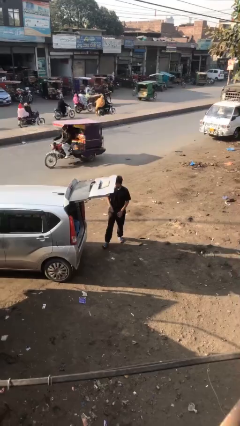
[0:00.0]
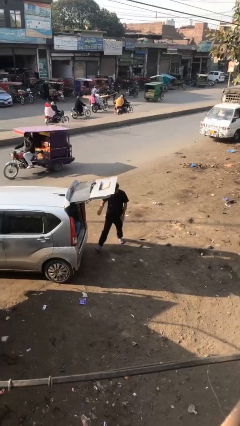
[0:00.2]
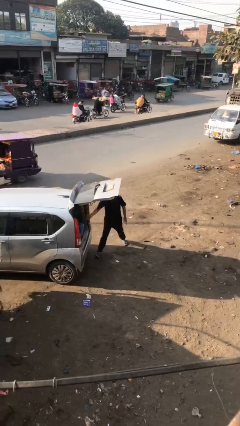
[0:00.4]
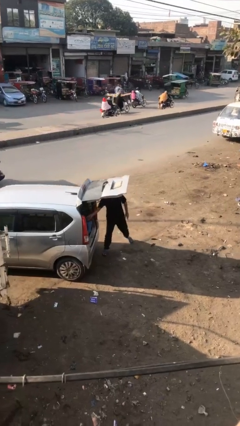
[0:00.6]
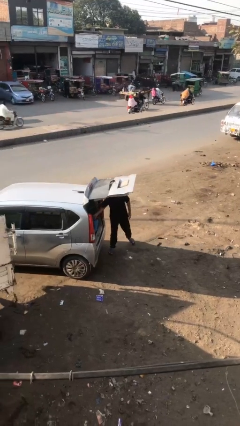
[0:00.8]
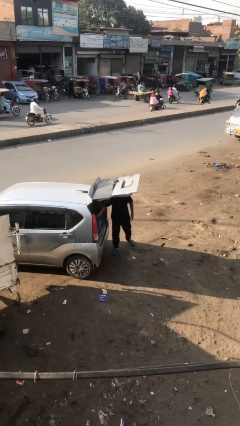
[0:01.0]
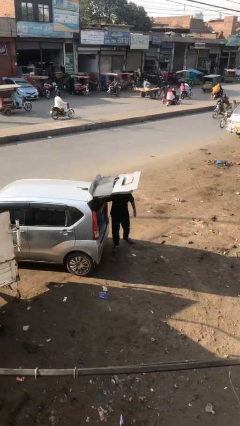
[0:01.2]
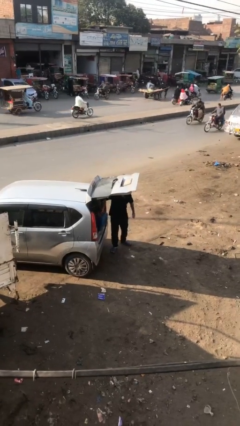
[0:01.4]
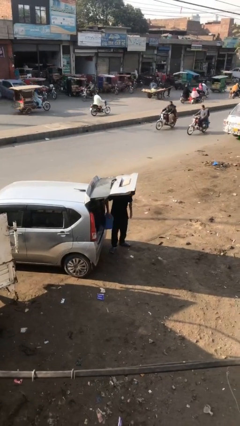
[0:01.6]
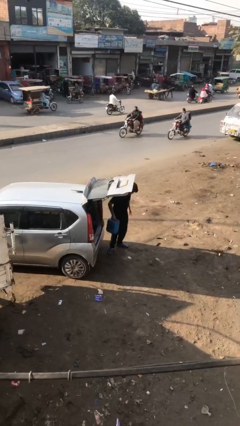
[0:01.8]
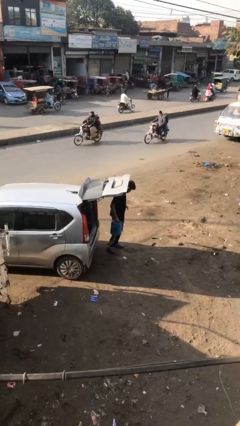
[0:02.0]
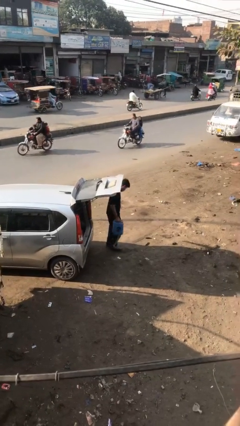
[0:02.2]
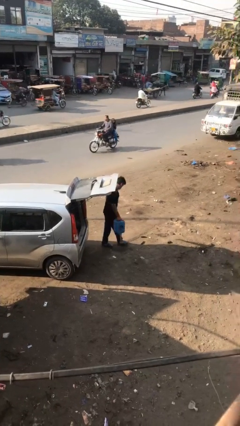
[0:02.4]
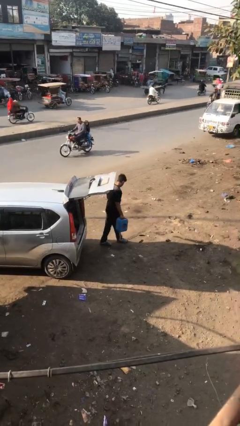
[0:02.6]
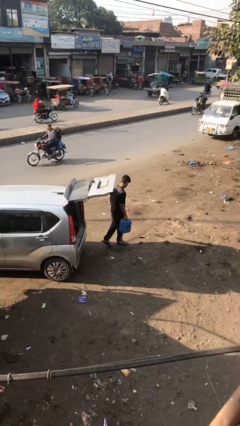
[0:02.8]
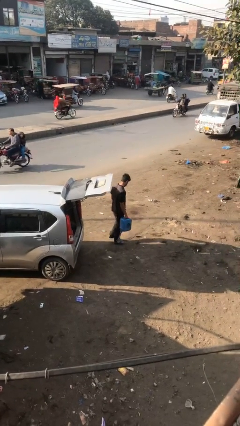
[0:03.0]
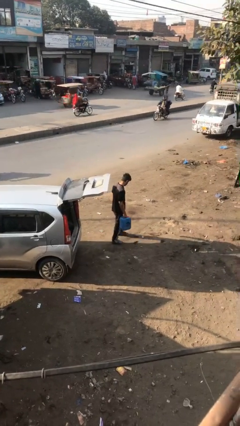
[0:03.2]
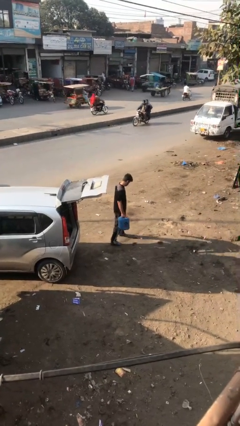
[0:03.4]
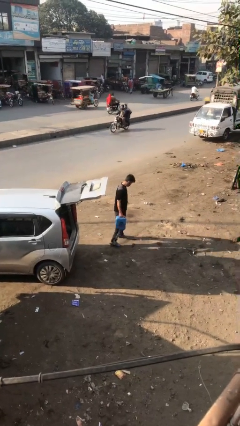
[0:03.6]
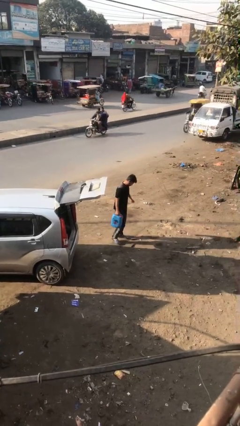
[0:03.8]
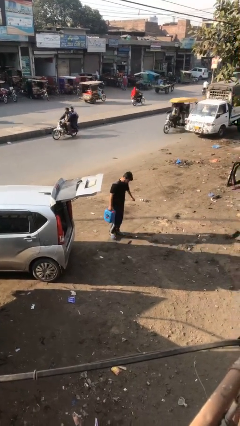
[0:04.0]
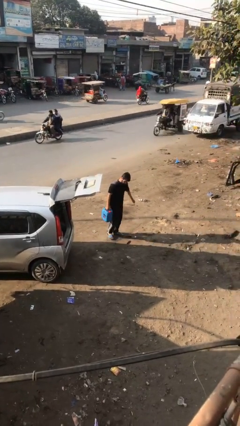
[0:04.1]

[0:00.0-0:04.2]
person unloads car

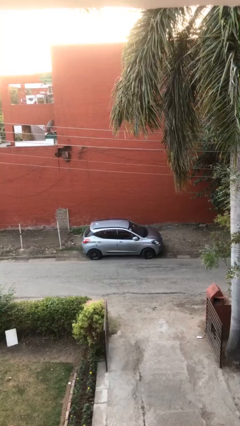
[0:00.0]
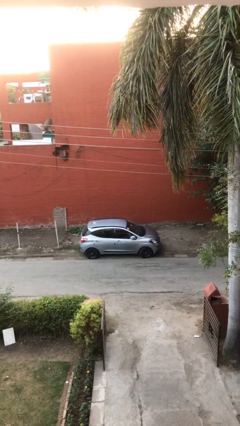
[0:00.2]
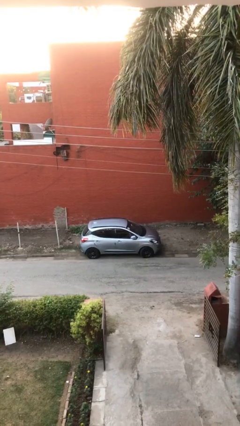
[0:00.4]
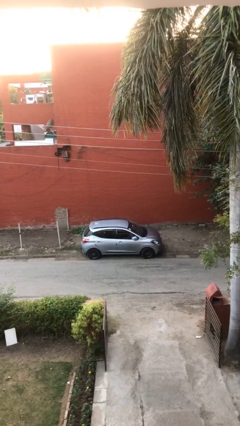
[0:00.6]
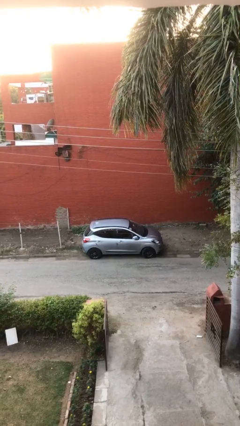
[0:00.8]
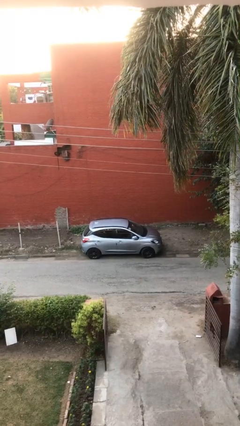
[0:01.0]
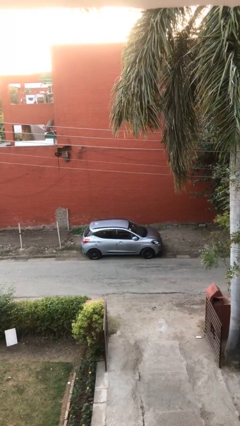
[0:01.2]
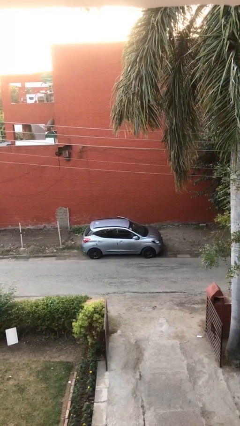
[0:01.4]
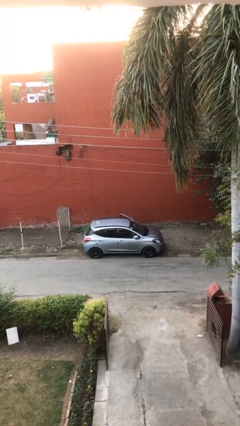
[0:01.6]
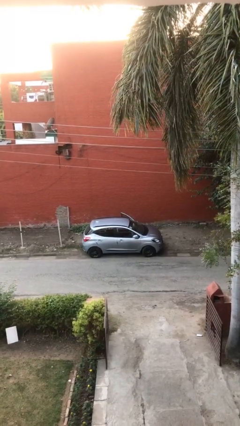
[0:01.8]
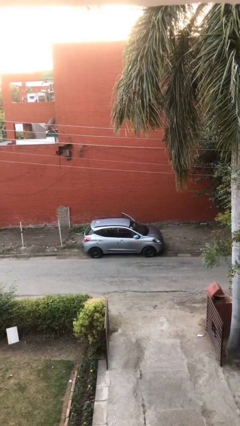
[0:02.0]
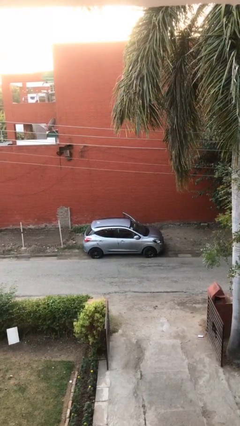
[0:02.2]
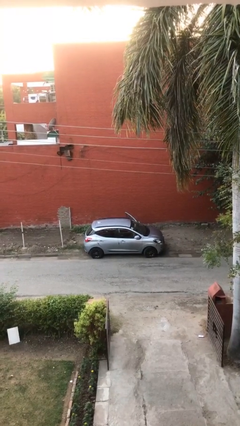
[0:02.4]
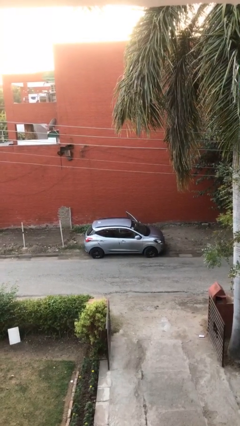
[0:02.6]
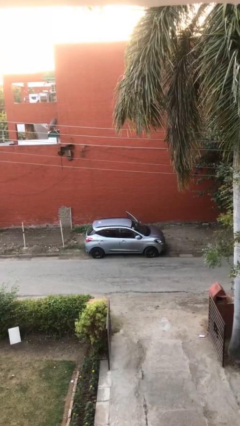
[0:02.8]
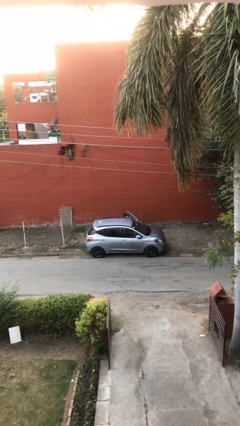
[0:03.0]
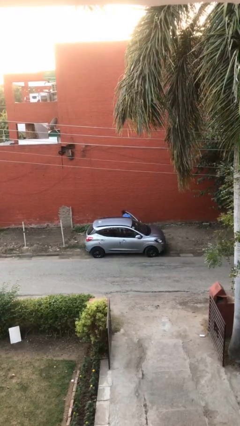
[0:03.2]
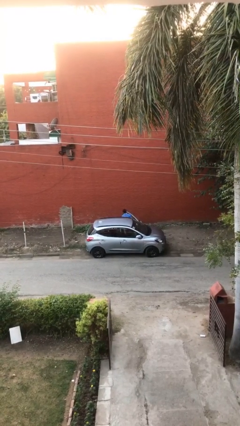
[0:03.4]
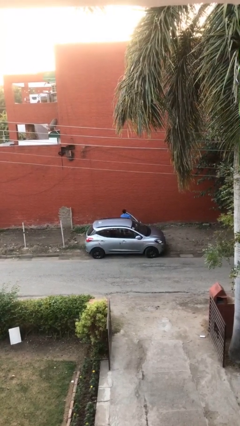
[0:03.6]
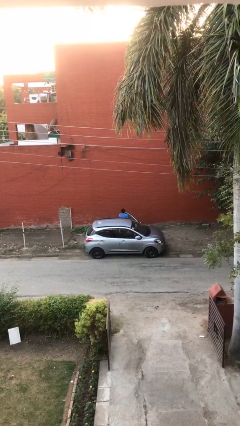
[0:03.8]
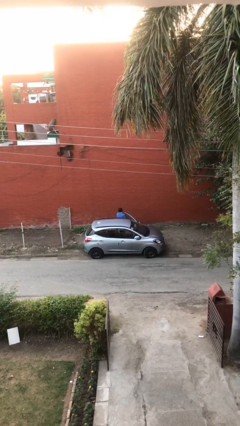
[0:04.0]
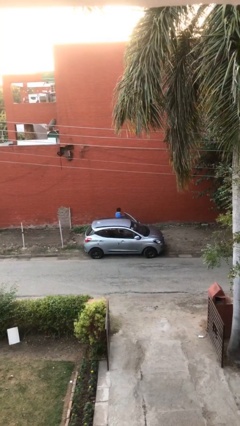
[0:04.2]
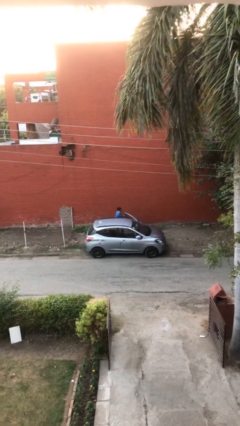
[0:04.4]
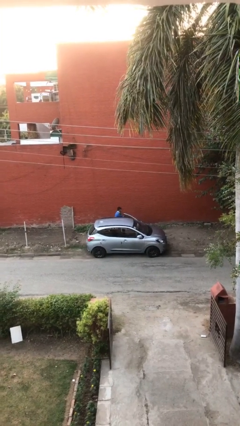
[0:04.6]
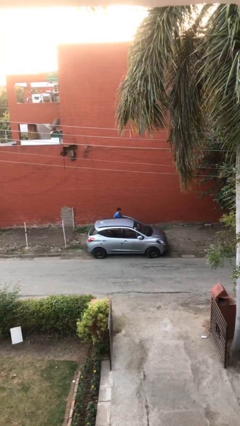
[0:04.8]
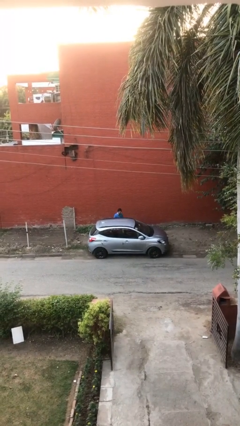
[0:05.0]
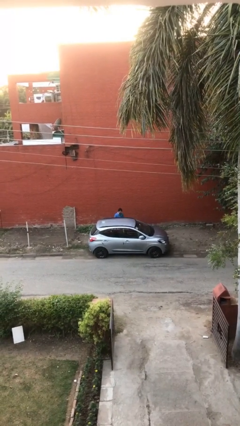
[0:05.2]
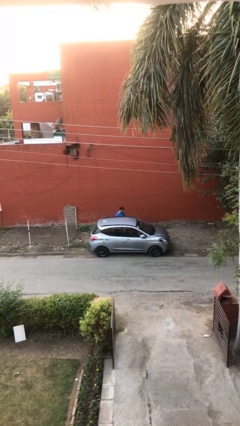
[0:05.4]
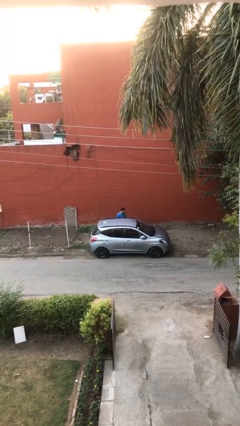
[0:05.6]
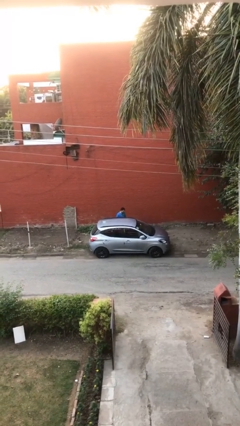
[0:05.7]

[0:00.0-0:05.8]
person exits car

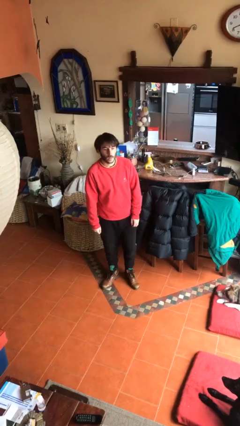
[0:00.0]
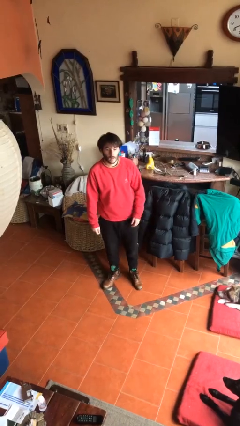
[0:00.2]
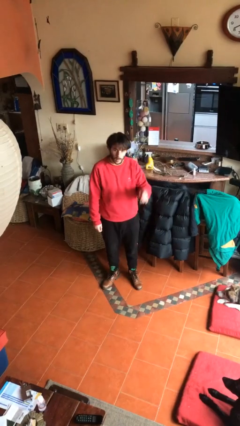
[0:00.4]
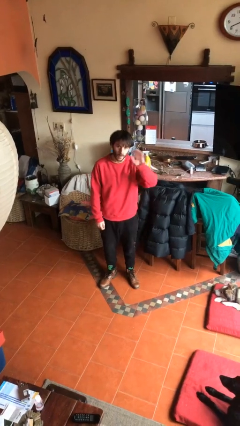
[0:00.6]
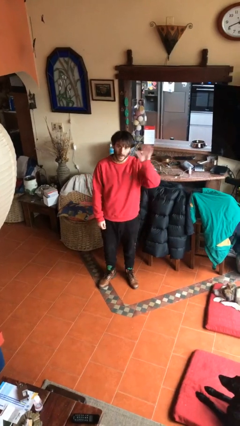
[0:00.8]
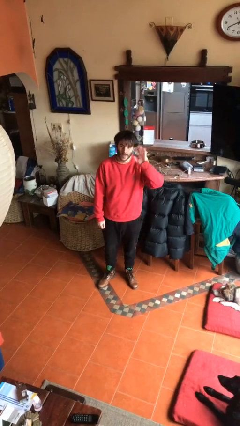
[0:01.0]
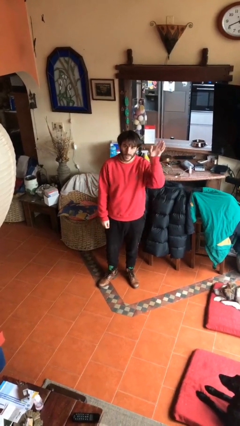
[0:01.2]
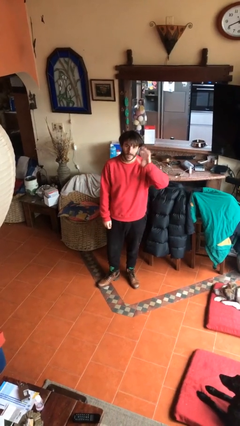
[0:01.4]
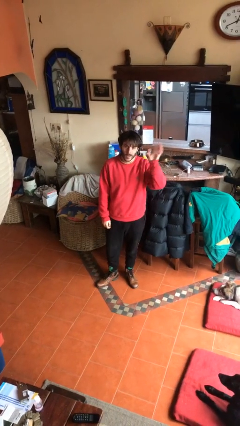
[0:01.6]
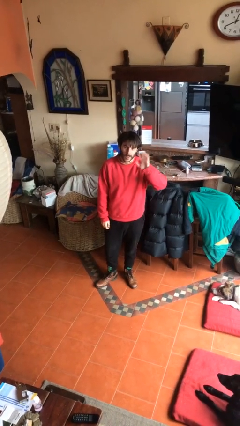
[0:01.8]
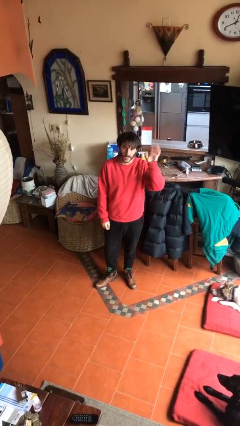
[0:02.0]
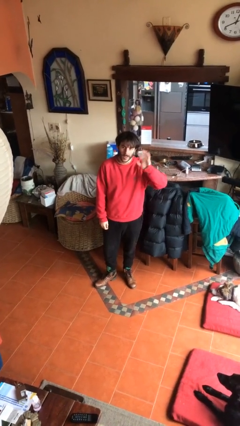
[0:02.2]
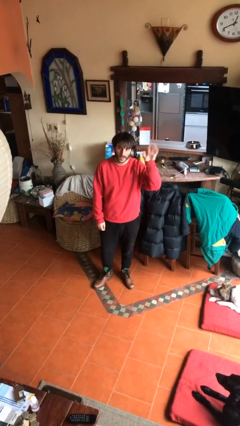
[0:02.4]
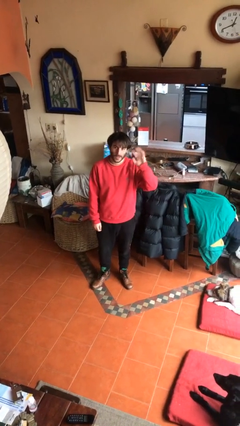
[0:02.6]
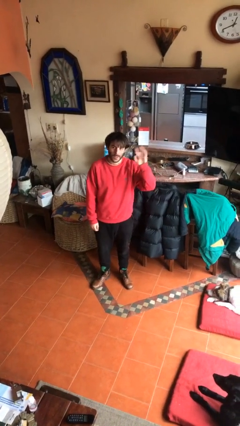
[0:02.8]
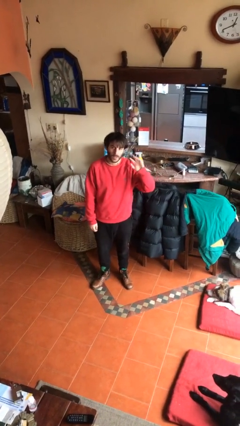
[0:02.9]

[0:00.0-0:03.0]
person waves at person

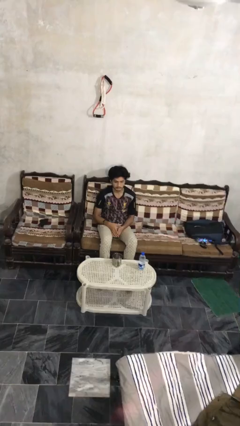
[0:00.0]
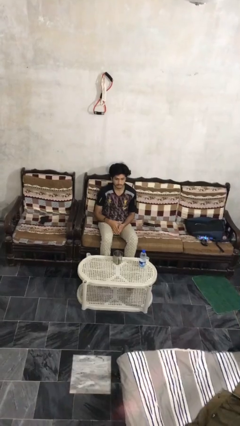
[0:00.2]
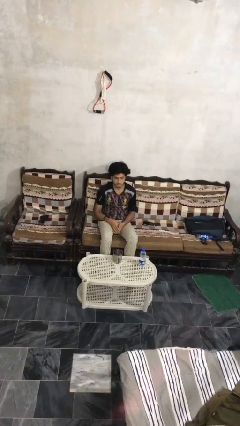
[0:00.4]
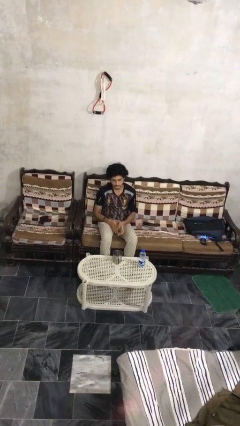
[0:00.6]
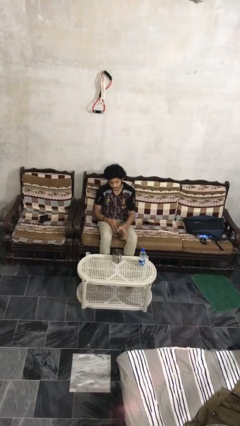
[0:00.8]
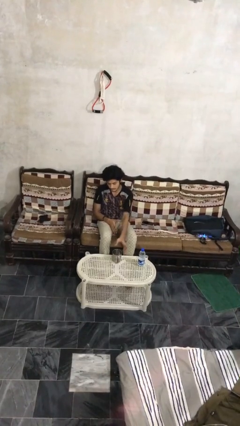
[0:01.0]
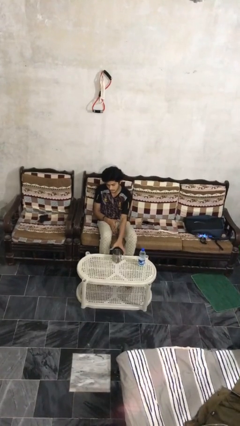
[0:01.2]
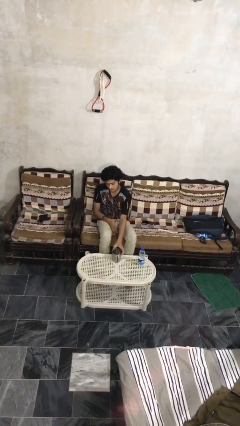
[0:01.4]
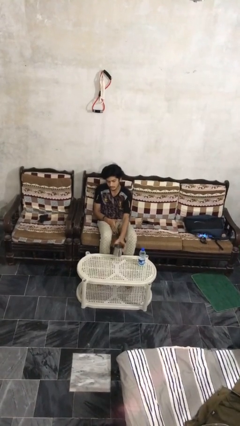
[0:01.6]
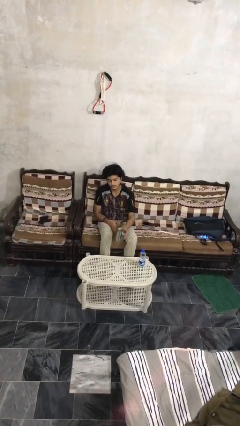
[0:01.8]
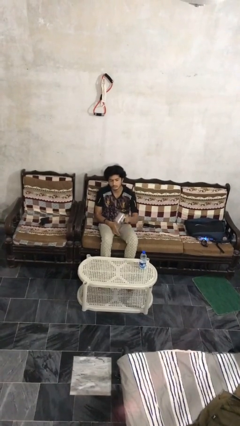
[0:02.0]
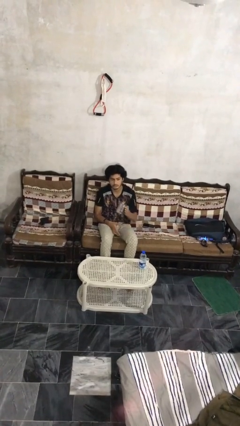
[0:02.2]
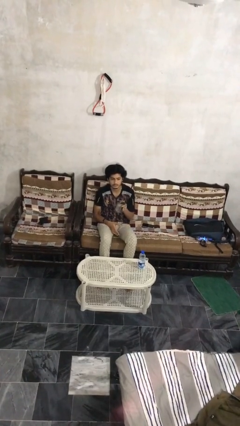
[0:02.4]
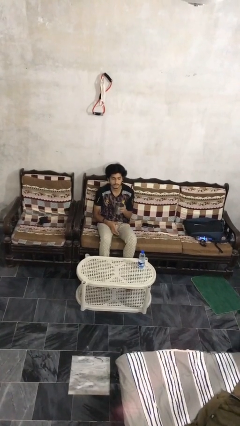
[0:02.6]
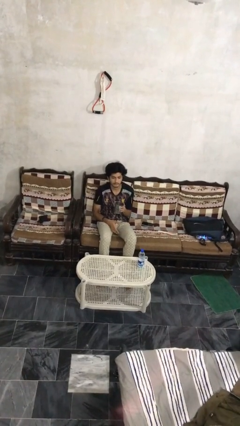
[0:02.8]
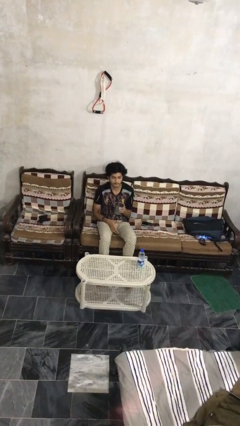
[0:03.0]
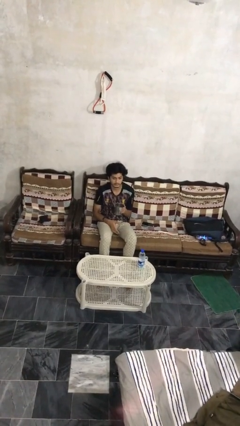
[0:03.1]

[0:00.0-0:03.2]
person picks up object from table

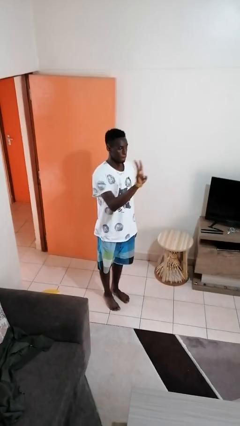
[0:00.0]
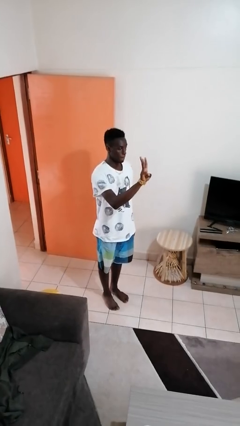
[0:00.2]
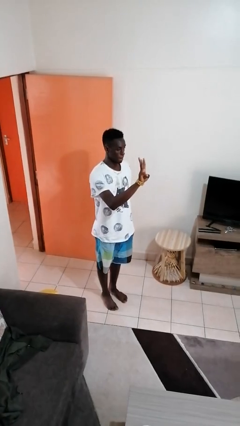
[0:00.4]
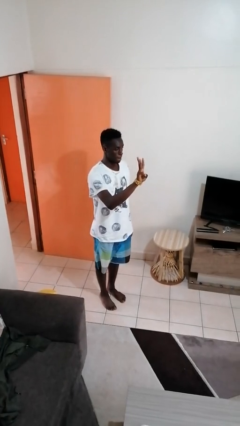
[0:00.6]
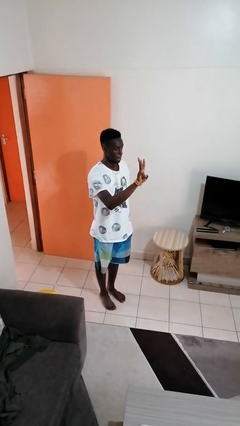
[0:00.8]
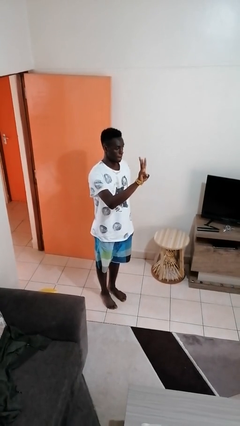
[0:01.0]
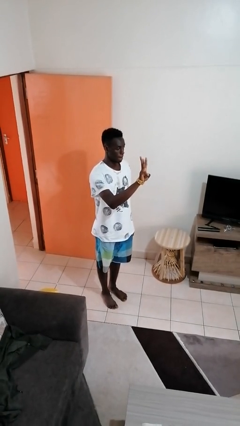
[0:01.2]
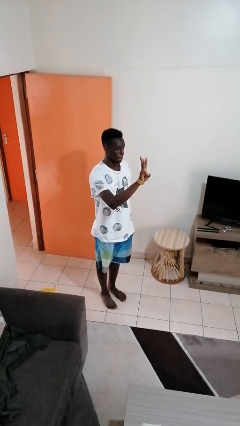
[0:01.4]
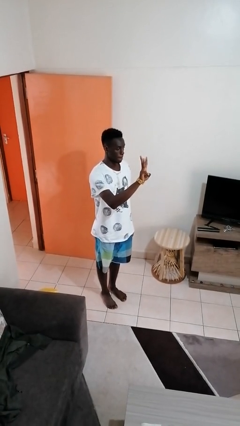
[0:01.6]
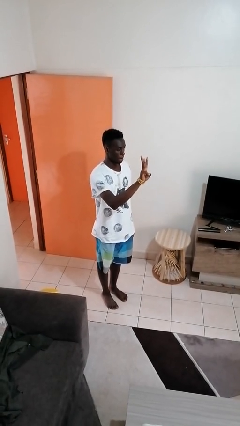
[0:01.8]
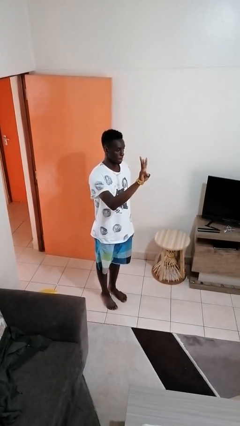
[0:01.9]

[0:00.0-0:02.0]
person gestures number three
